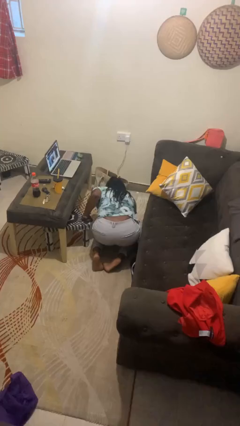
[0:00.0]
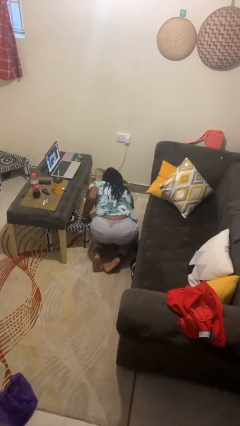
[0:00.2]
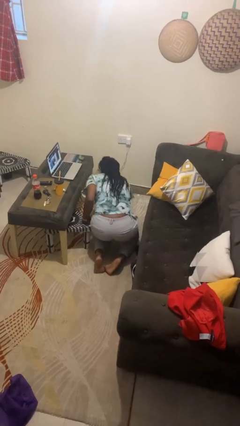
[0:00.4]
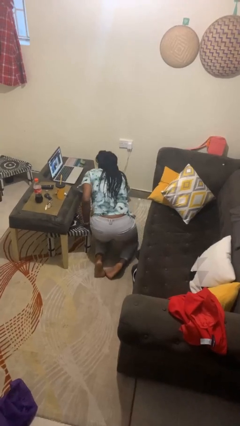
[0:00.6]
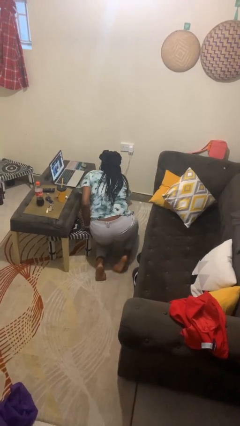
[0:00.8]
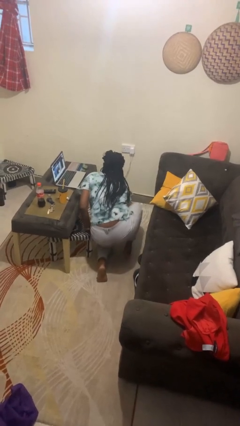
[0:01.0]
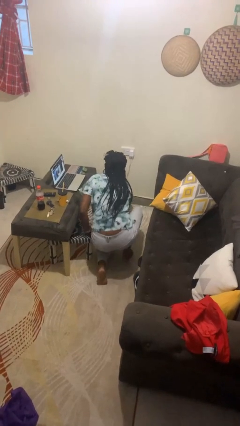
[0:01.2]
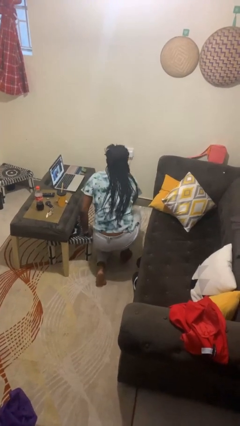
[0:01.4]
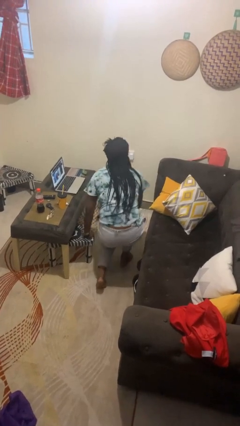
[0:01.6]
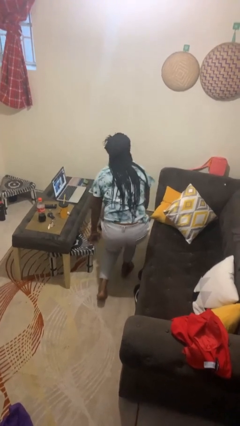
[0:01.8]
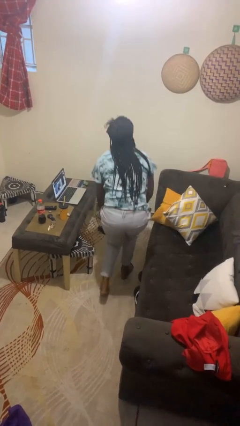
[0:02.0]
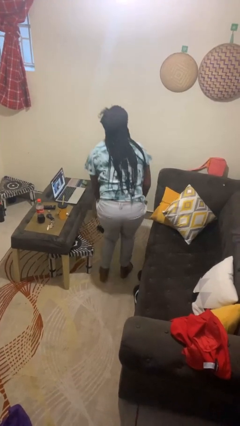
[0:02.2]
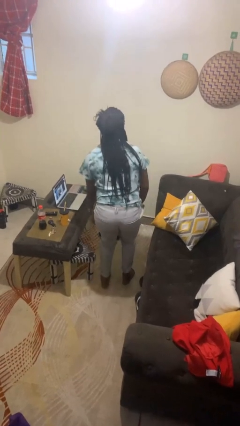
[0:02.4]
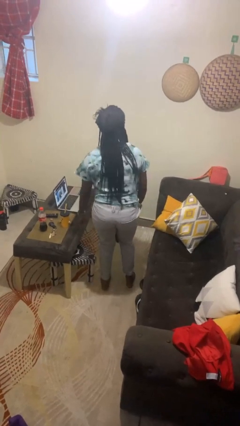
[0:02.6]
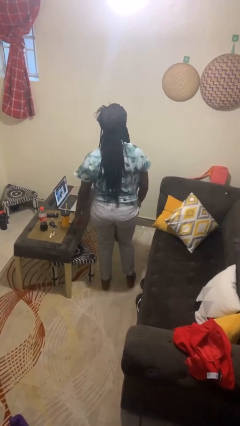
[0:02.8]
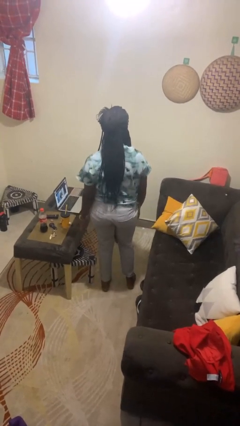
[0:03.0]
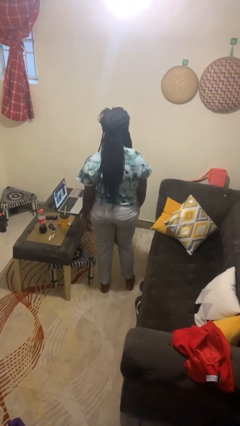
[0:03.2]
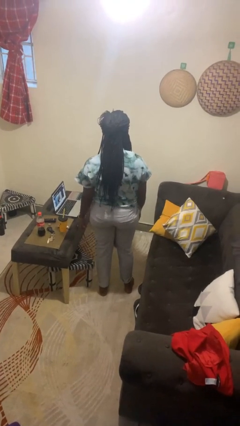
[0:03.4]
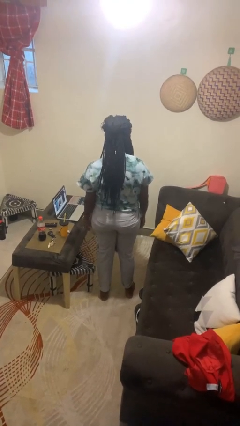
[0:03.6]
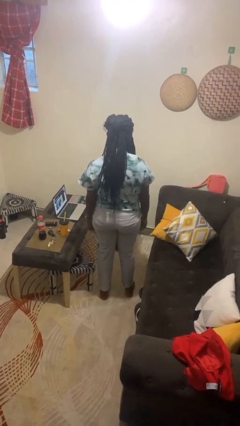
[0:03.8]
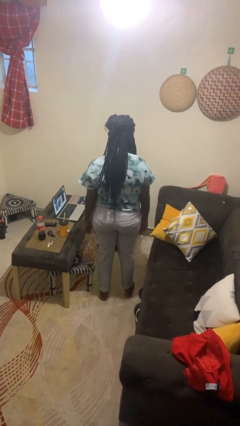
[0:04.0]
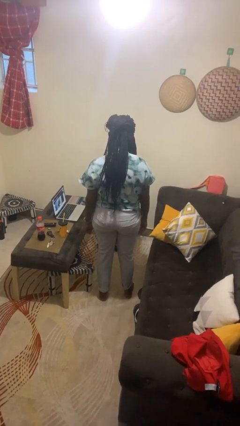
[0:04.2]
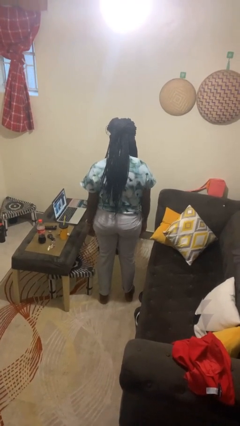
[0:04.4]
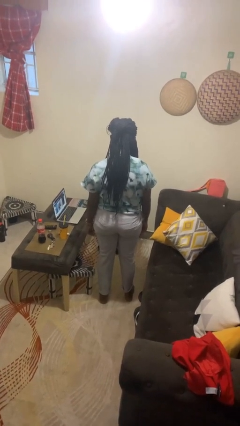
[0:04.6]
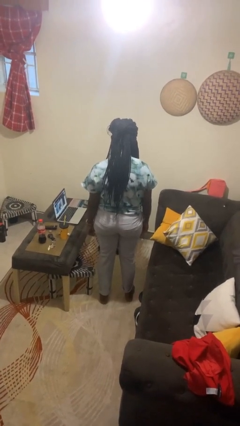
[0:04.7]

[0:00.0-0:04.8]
person stands up from floor

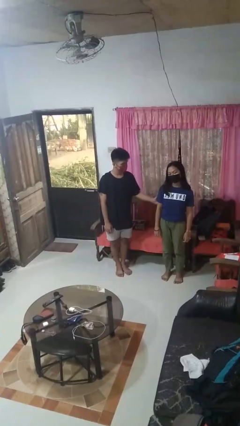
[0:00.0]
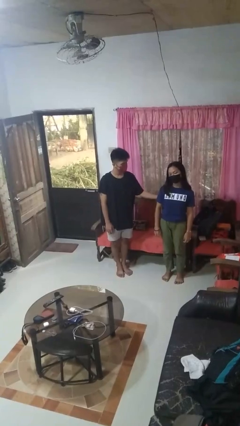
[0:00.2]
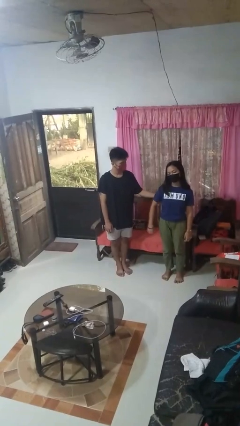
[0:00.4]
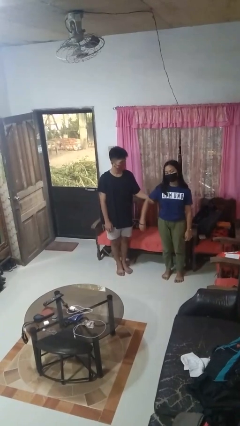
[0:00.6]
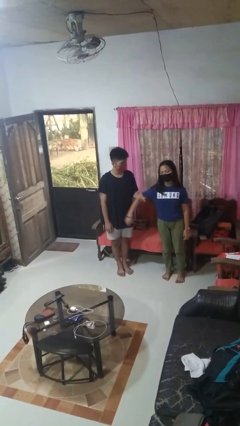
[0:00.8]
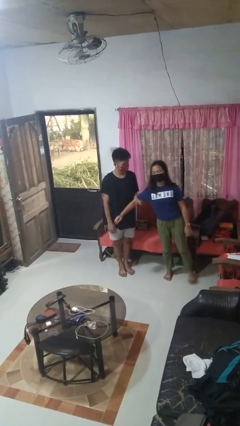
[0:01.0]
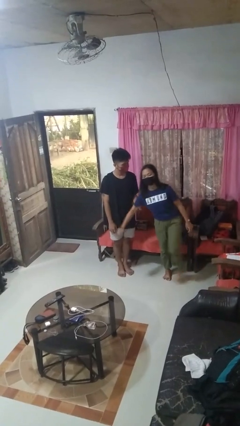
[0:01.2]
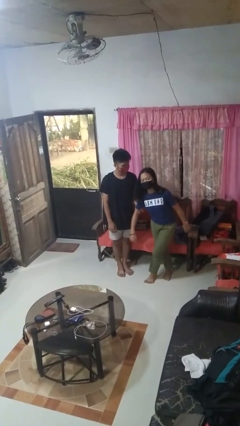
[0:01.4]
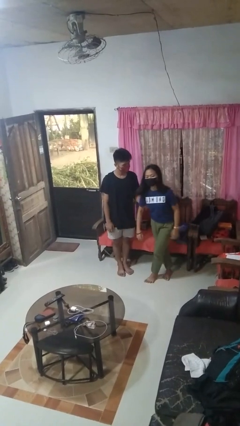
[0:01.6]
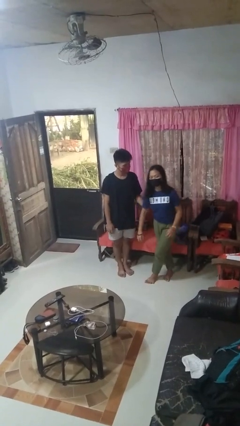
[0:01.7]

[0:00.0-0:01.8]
person grabs person by bicep

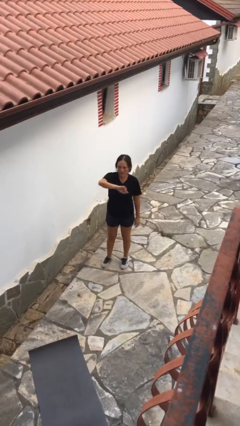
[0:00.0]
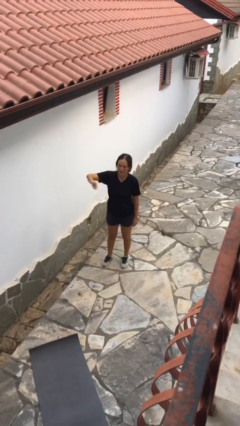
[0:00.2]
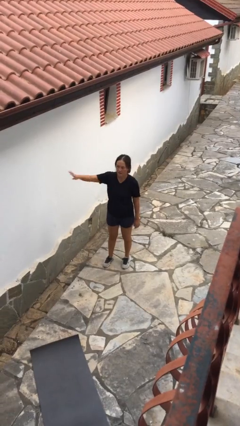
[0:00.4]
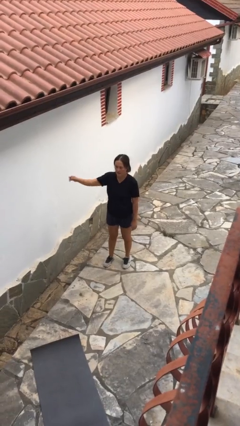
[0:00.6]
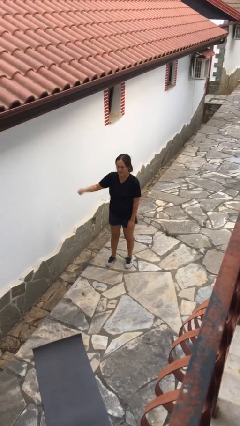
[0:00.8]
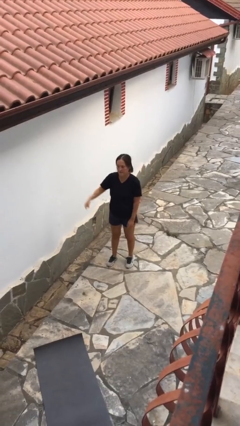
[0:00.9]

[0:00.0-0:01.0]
person gestures swipe right

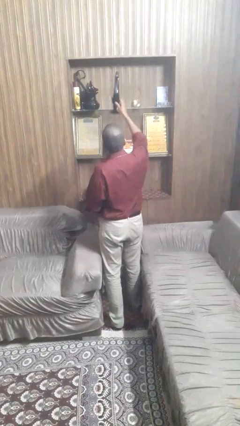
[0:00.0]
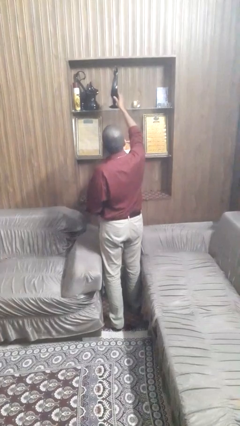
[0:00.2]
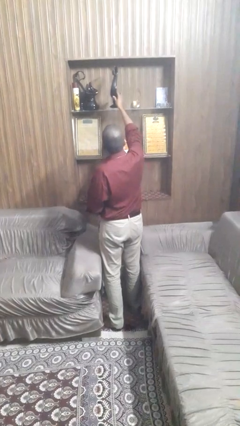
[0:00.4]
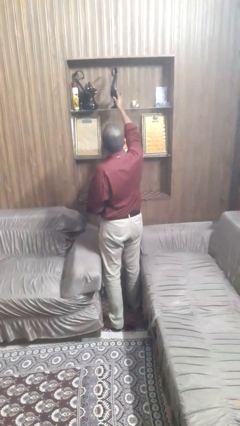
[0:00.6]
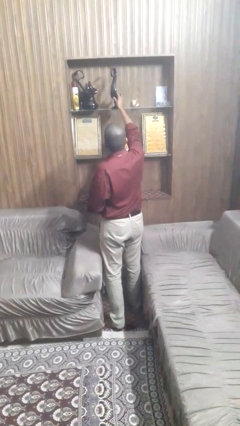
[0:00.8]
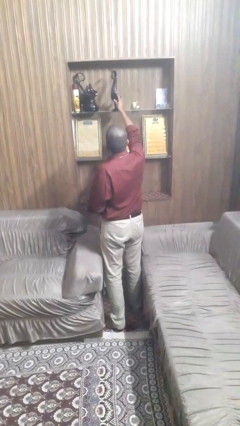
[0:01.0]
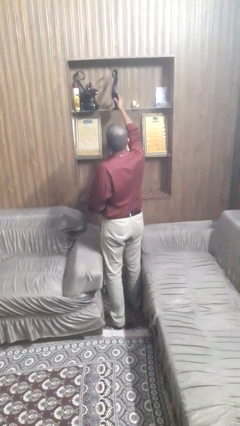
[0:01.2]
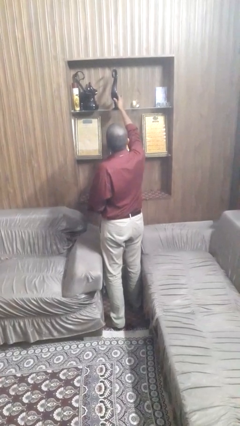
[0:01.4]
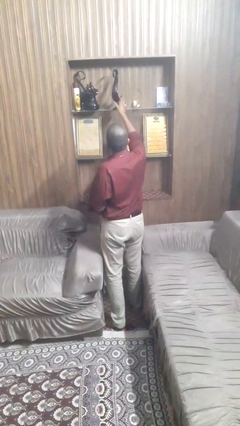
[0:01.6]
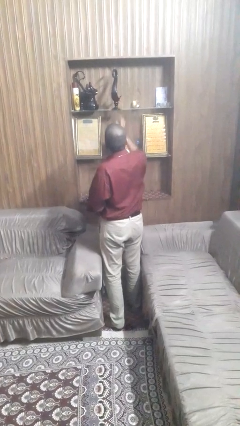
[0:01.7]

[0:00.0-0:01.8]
person puts down object on shelf

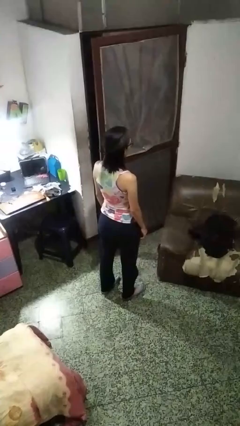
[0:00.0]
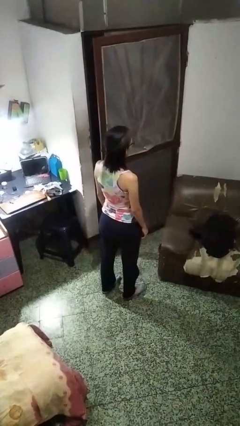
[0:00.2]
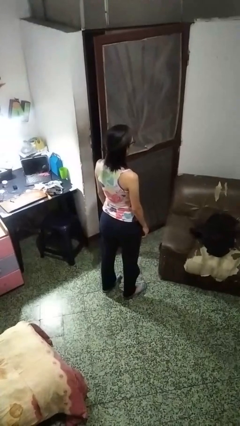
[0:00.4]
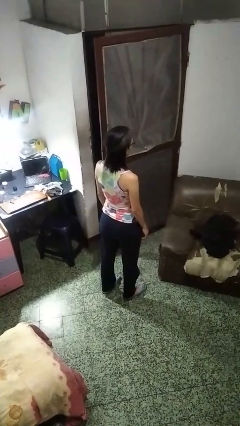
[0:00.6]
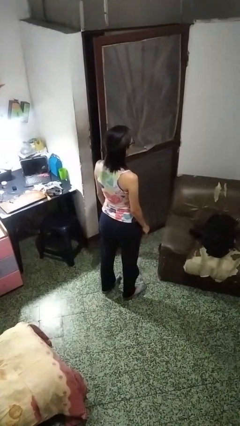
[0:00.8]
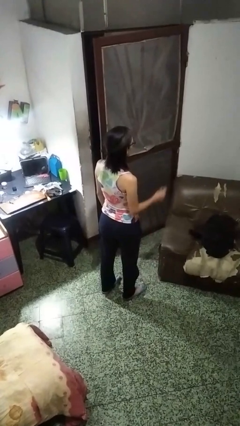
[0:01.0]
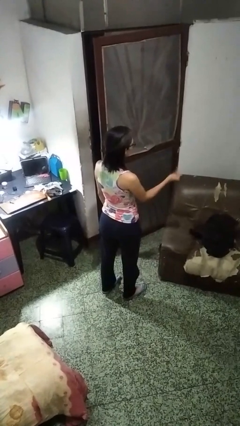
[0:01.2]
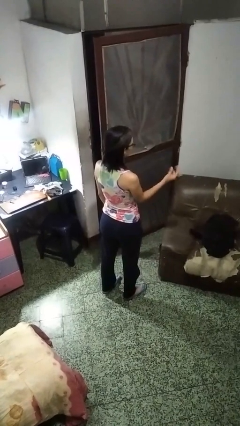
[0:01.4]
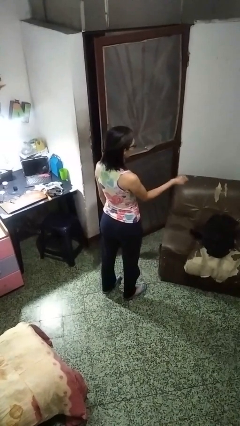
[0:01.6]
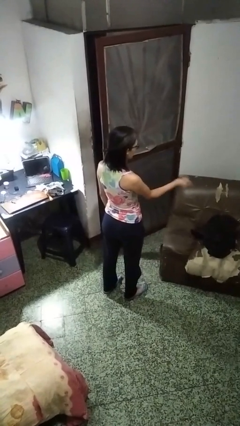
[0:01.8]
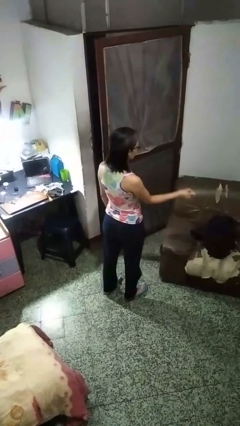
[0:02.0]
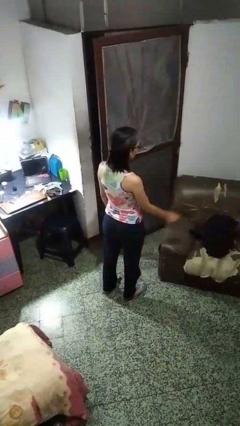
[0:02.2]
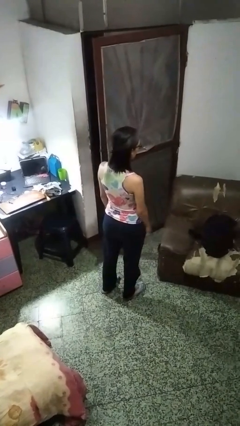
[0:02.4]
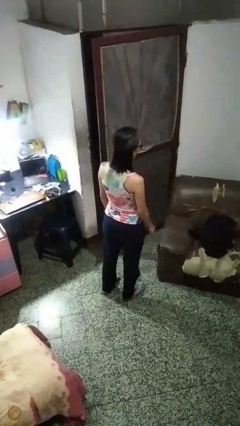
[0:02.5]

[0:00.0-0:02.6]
person snaps fingers

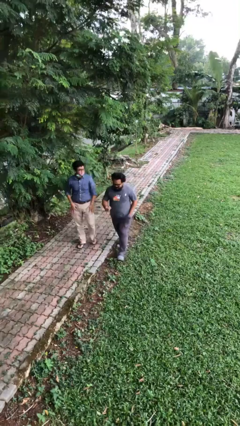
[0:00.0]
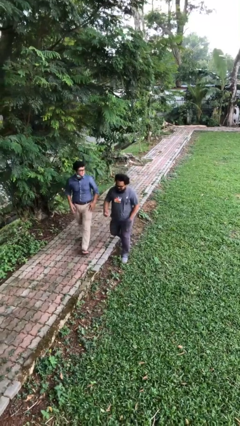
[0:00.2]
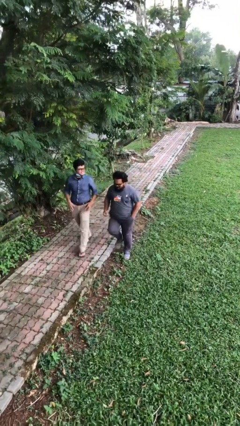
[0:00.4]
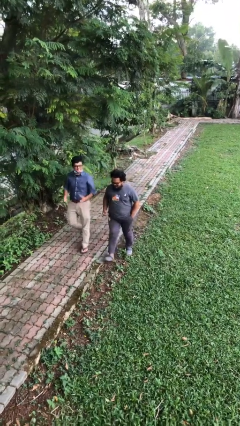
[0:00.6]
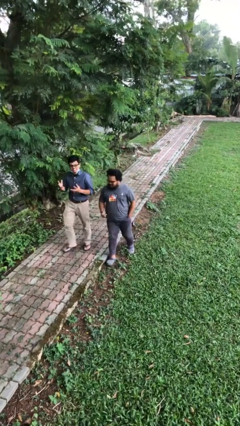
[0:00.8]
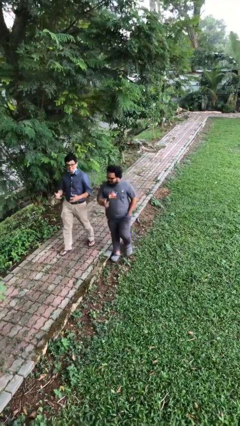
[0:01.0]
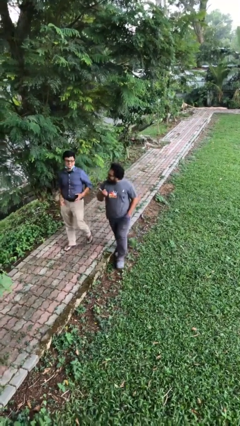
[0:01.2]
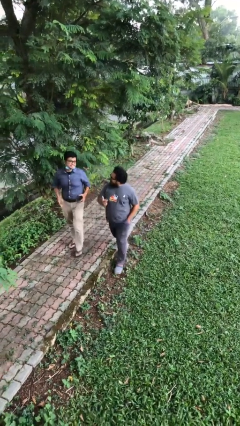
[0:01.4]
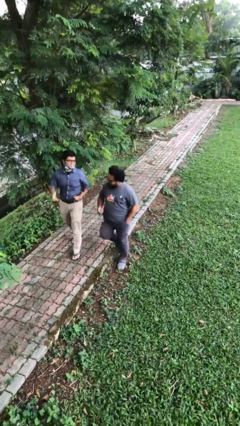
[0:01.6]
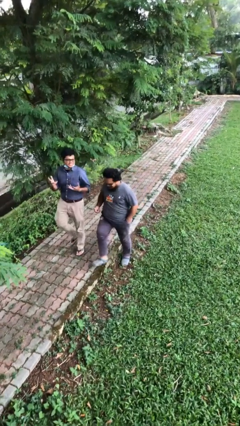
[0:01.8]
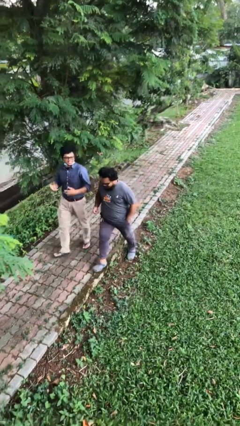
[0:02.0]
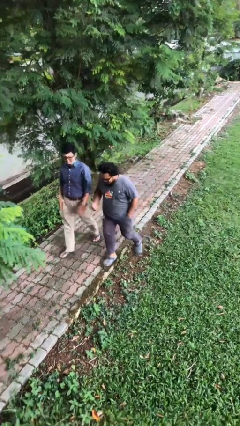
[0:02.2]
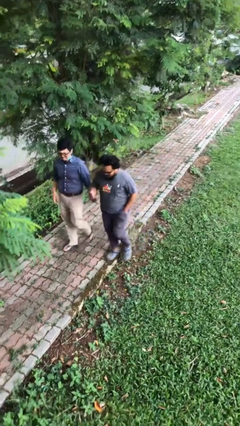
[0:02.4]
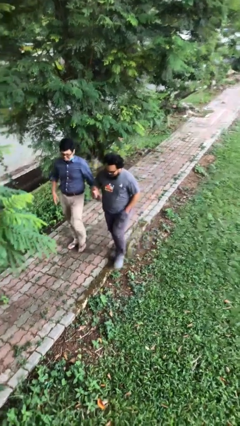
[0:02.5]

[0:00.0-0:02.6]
person talks to person

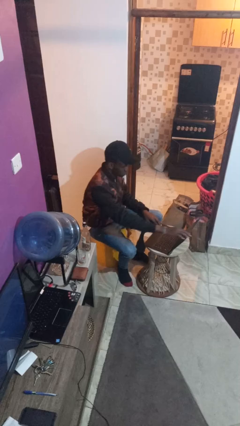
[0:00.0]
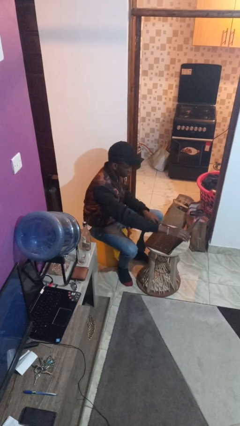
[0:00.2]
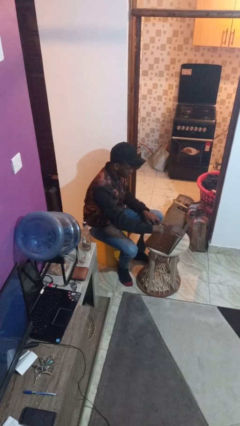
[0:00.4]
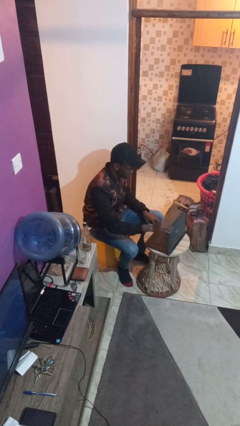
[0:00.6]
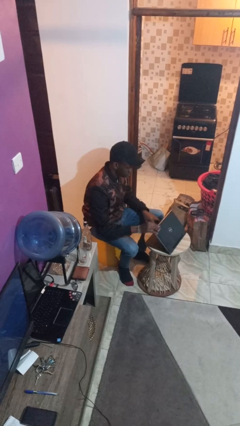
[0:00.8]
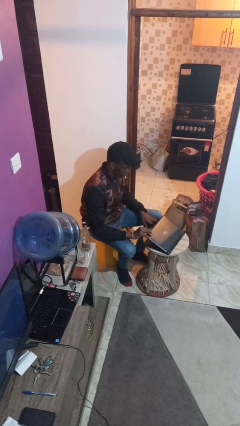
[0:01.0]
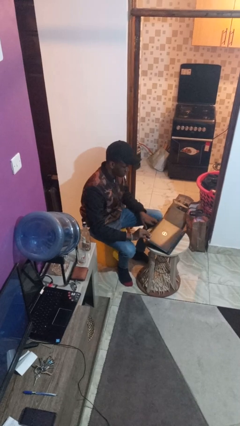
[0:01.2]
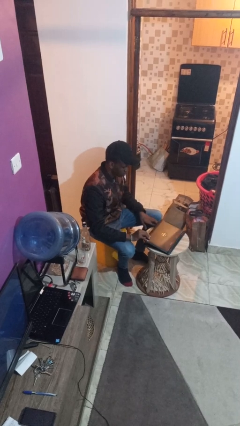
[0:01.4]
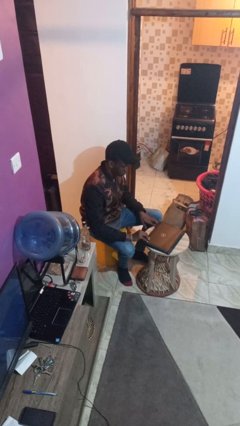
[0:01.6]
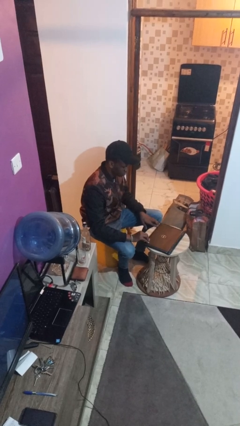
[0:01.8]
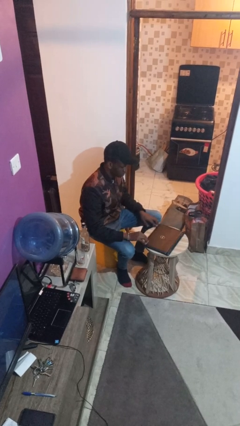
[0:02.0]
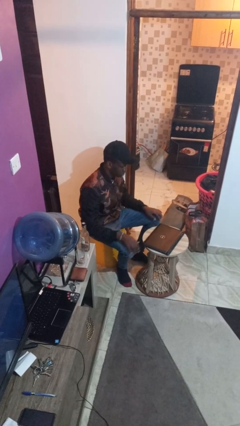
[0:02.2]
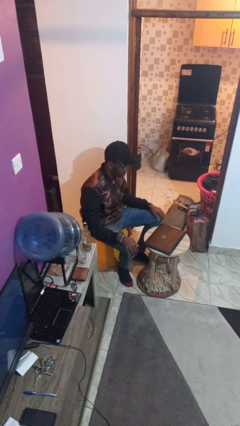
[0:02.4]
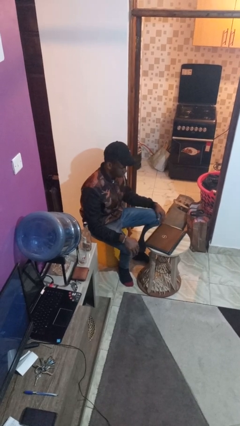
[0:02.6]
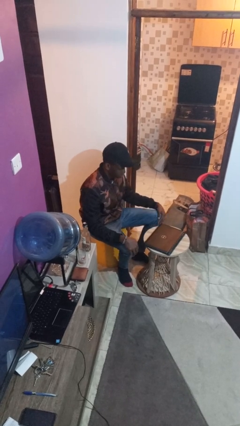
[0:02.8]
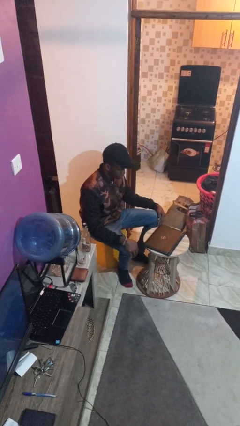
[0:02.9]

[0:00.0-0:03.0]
person closes laptop
